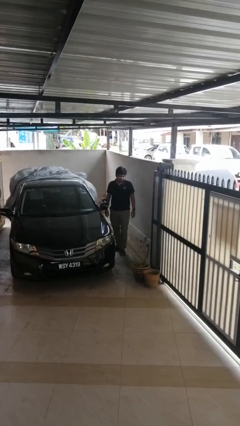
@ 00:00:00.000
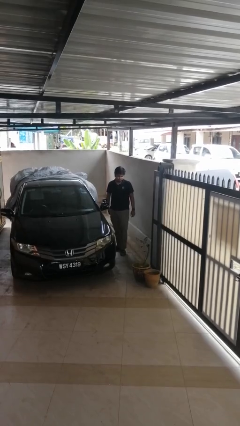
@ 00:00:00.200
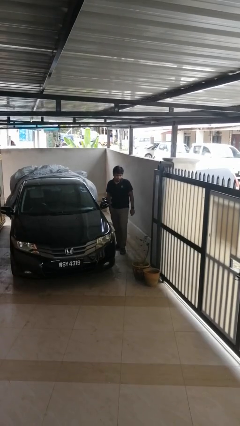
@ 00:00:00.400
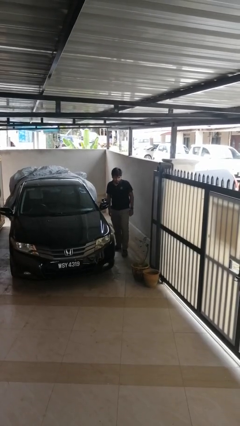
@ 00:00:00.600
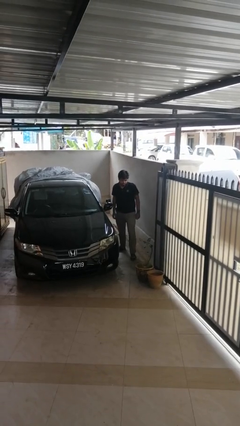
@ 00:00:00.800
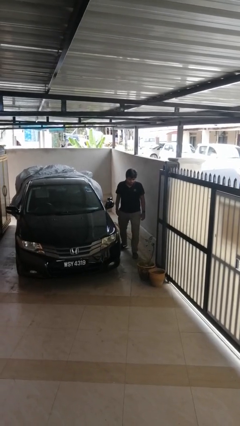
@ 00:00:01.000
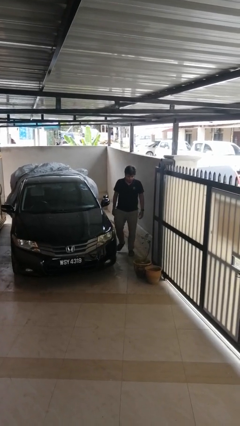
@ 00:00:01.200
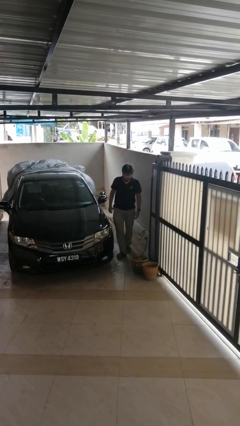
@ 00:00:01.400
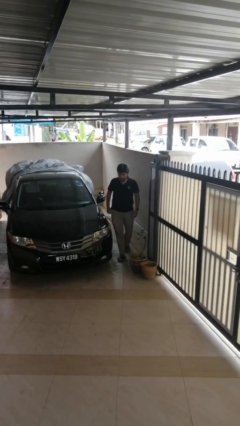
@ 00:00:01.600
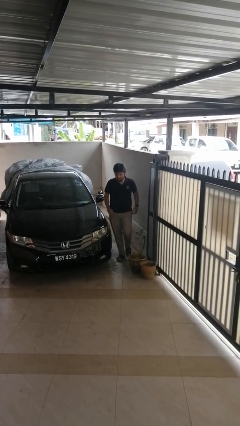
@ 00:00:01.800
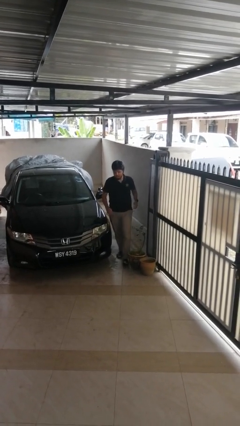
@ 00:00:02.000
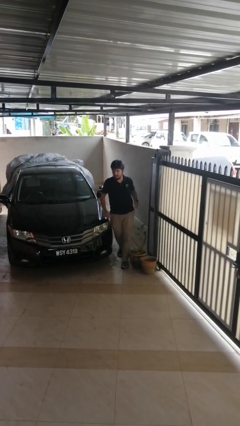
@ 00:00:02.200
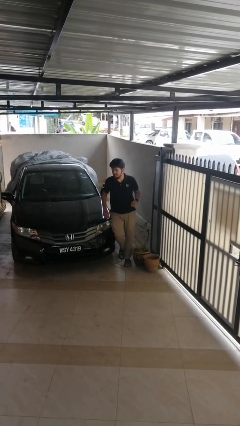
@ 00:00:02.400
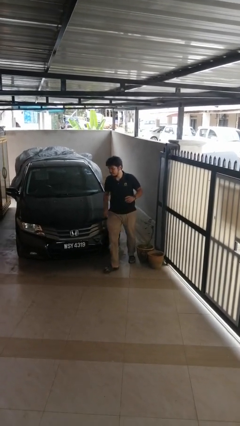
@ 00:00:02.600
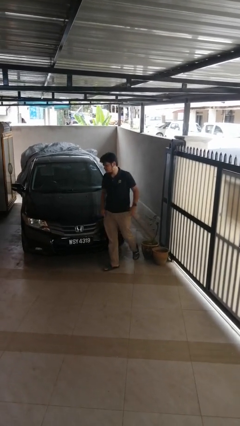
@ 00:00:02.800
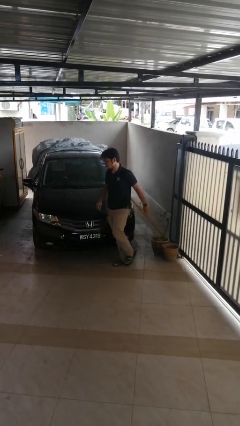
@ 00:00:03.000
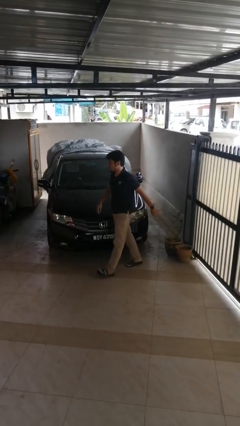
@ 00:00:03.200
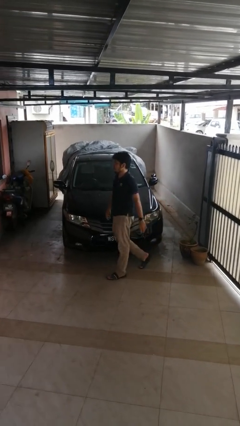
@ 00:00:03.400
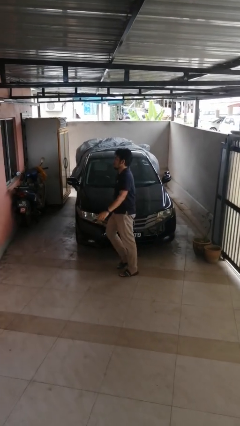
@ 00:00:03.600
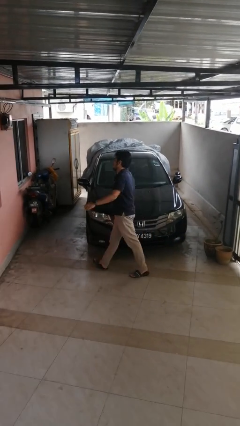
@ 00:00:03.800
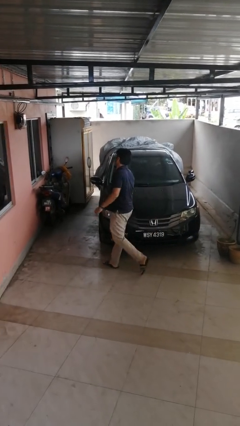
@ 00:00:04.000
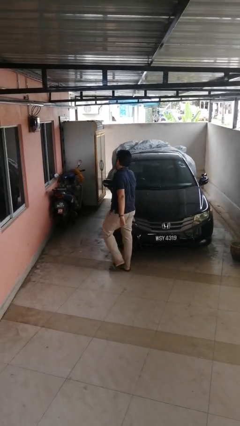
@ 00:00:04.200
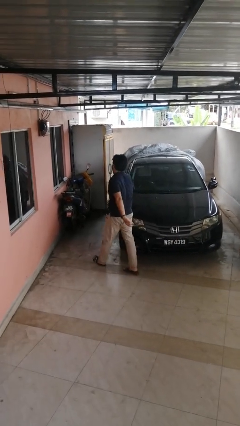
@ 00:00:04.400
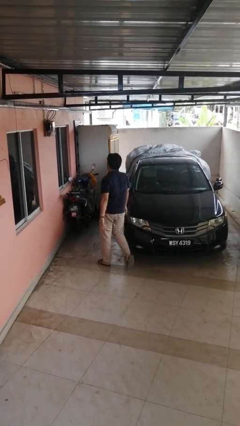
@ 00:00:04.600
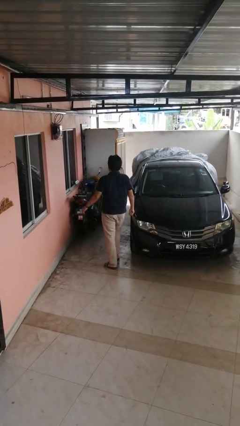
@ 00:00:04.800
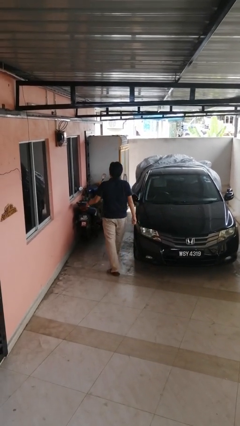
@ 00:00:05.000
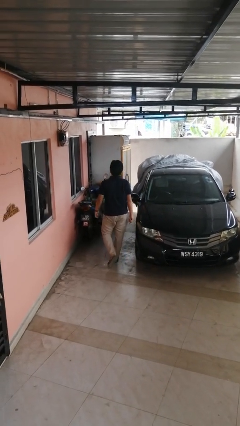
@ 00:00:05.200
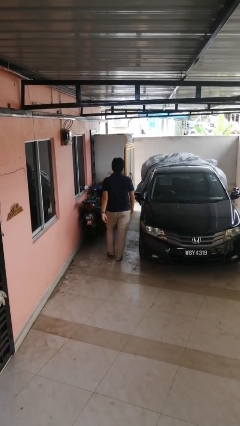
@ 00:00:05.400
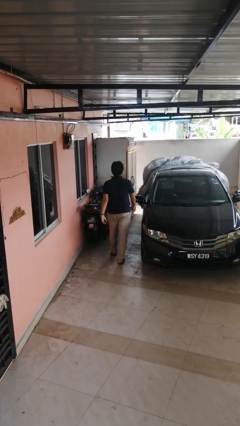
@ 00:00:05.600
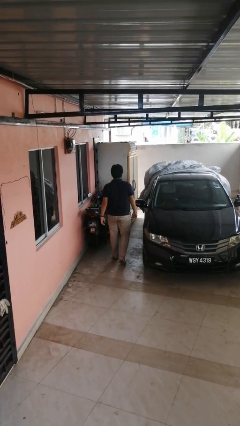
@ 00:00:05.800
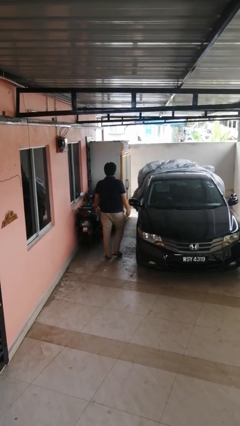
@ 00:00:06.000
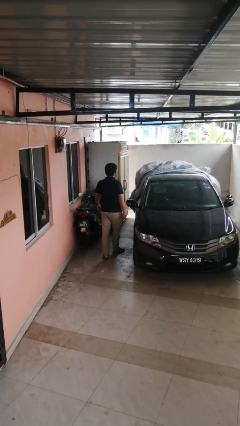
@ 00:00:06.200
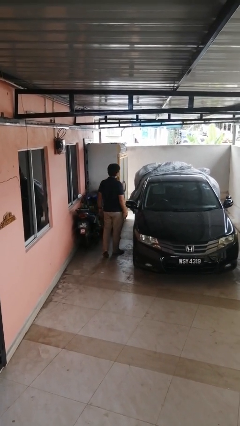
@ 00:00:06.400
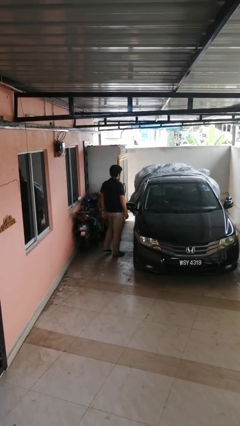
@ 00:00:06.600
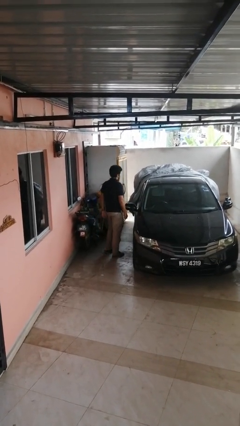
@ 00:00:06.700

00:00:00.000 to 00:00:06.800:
person walks around car

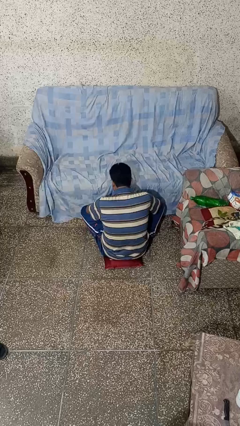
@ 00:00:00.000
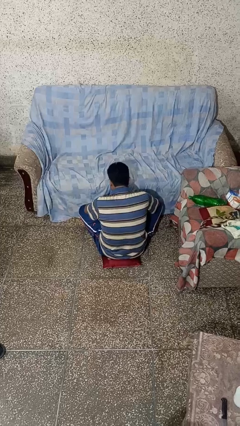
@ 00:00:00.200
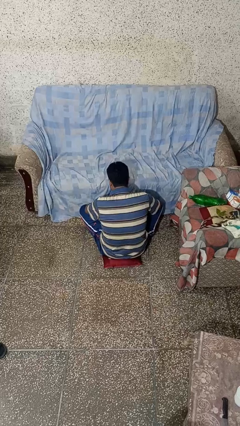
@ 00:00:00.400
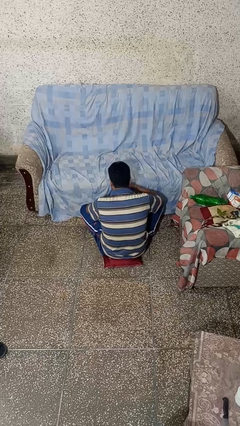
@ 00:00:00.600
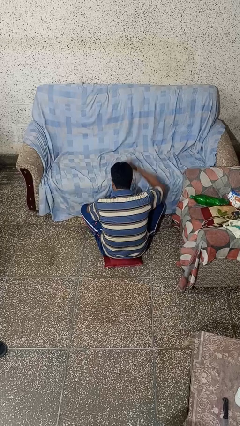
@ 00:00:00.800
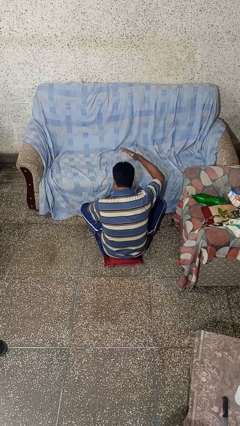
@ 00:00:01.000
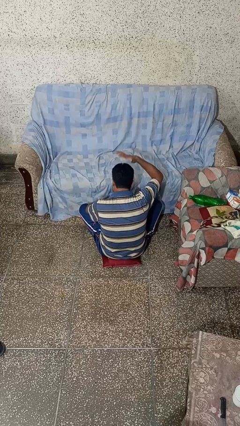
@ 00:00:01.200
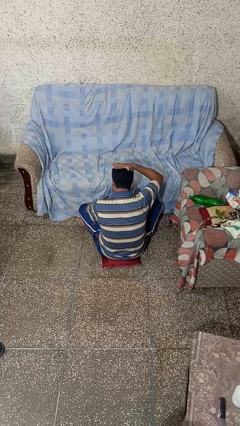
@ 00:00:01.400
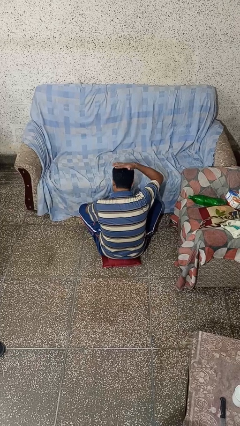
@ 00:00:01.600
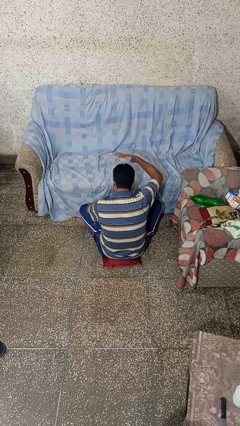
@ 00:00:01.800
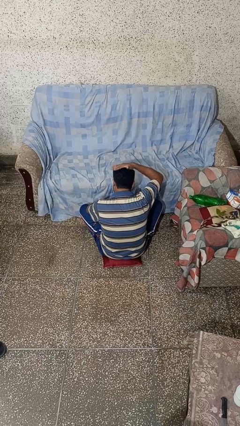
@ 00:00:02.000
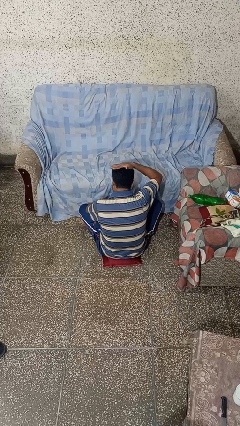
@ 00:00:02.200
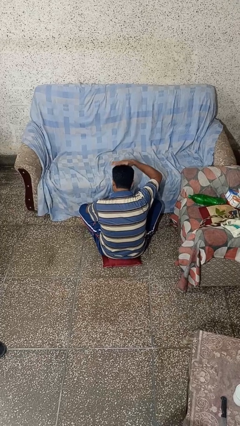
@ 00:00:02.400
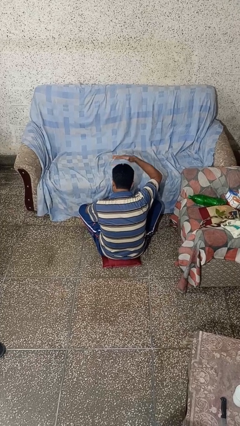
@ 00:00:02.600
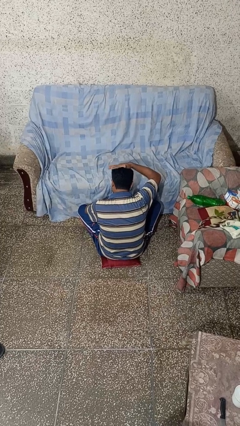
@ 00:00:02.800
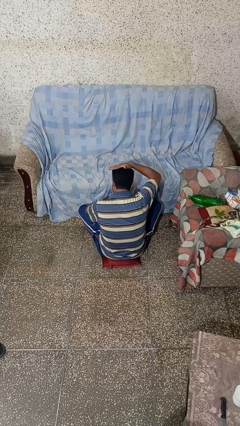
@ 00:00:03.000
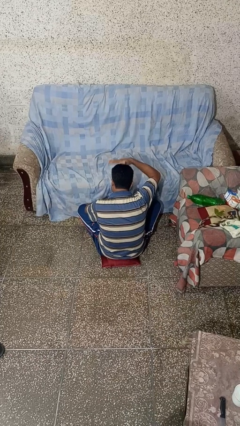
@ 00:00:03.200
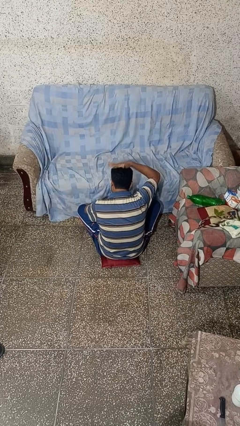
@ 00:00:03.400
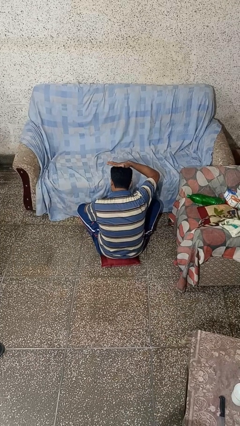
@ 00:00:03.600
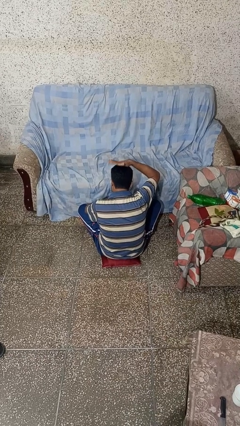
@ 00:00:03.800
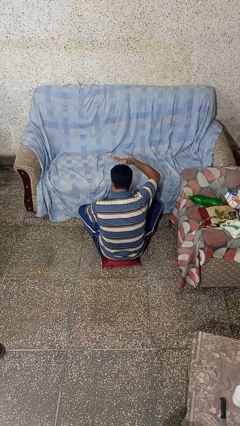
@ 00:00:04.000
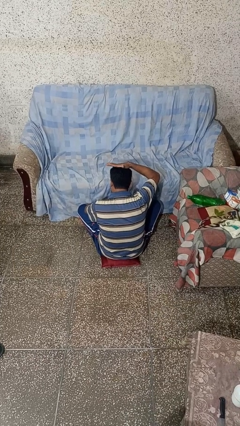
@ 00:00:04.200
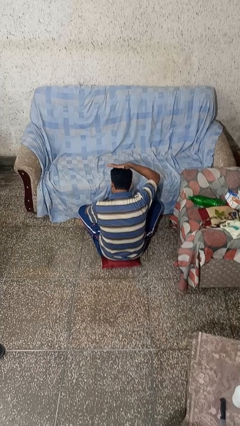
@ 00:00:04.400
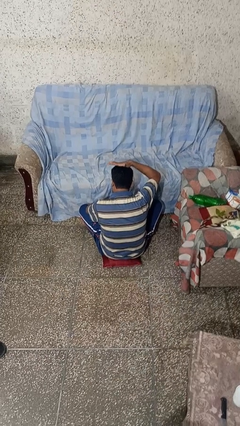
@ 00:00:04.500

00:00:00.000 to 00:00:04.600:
person pats head

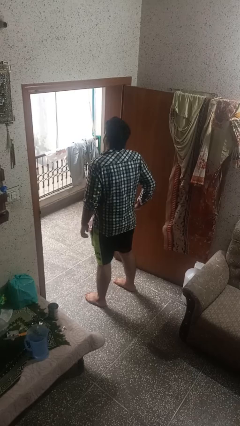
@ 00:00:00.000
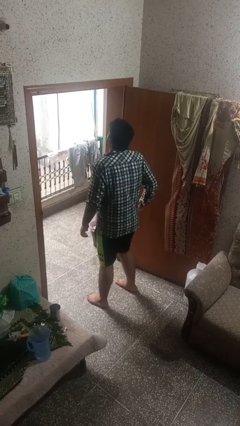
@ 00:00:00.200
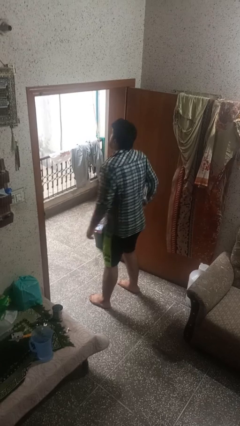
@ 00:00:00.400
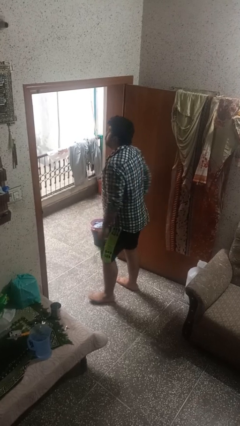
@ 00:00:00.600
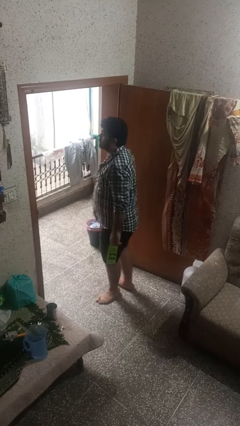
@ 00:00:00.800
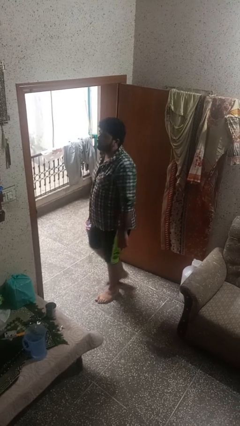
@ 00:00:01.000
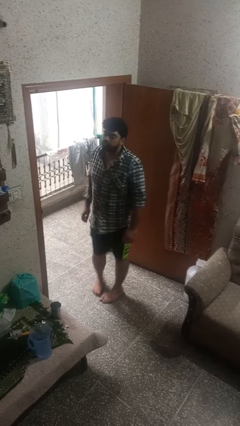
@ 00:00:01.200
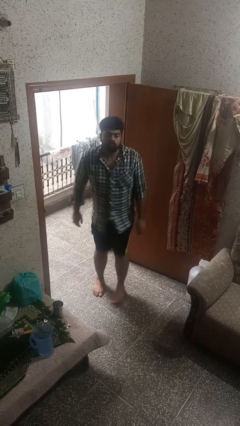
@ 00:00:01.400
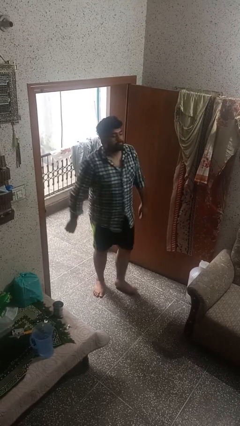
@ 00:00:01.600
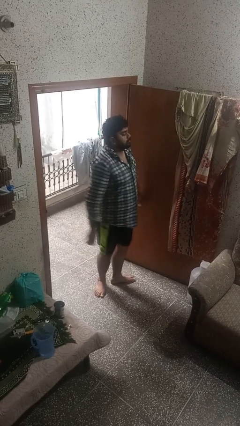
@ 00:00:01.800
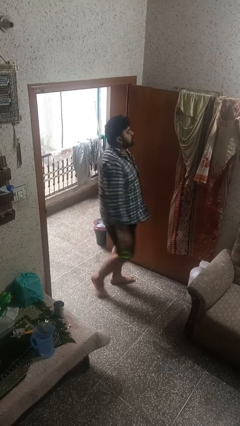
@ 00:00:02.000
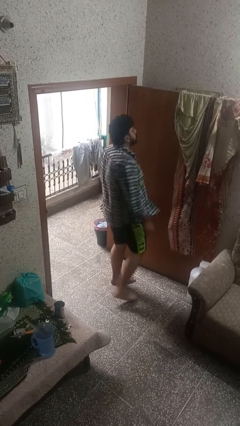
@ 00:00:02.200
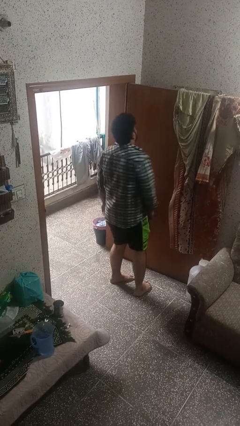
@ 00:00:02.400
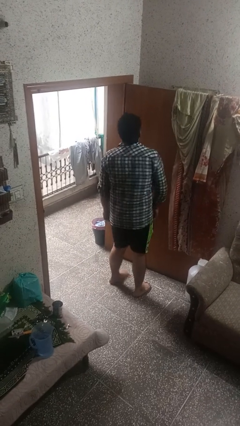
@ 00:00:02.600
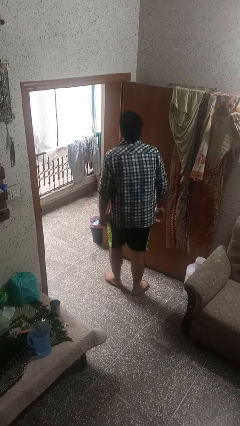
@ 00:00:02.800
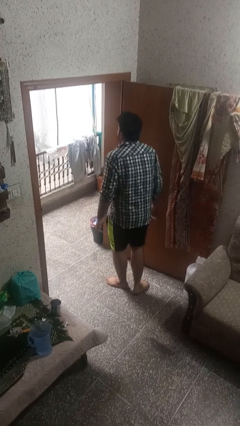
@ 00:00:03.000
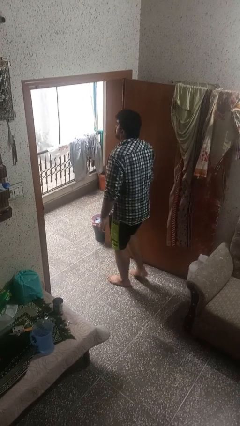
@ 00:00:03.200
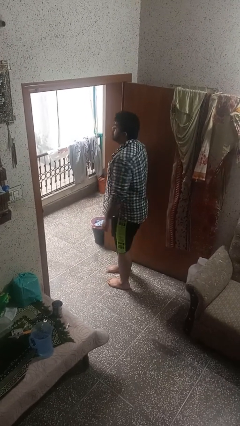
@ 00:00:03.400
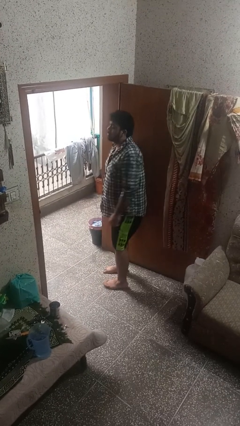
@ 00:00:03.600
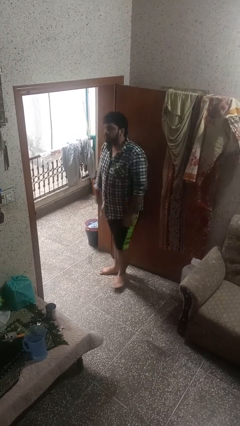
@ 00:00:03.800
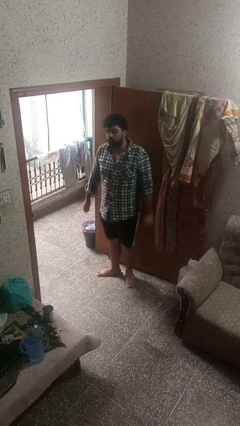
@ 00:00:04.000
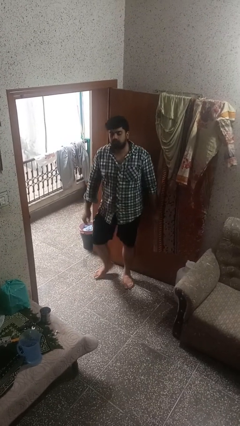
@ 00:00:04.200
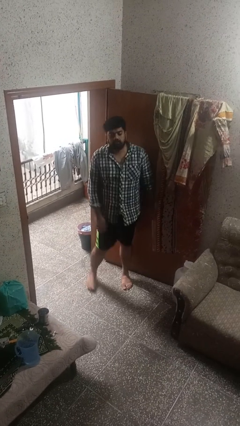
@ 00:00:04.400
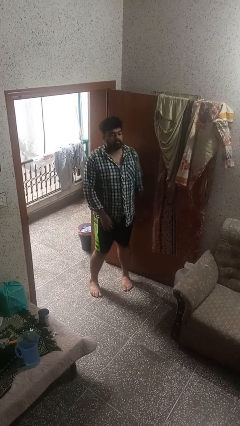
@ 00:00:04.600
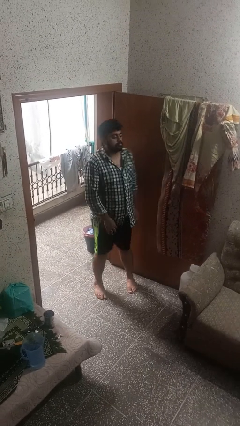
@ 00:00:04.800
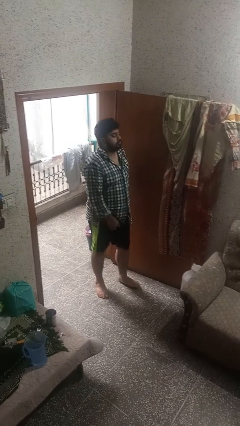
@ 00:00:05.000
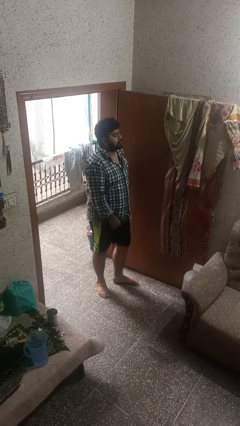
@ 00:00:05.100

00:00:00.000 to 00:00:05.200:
person twirls

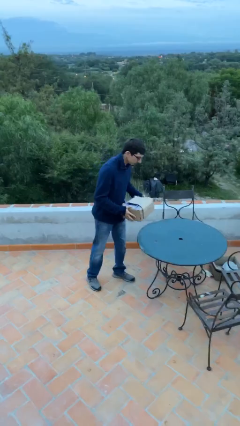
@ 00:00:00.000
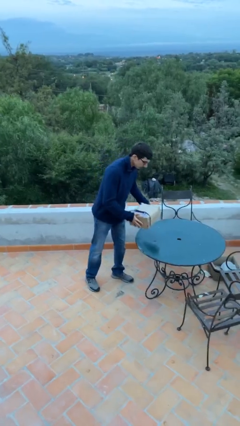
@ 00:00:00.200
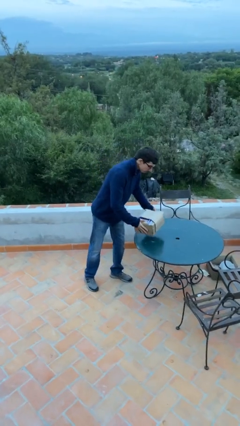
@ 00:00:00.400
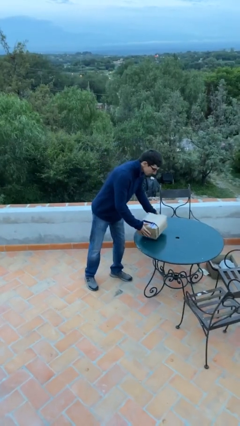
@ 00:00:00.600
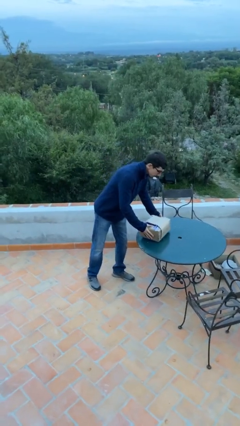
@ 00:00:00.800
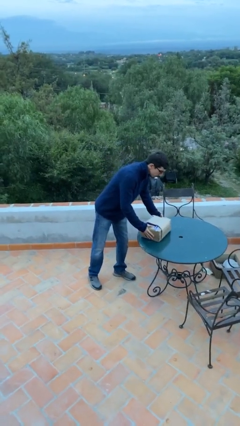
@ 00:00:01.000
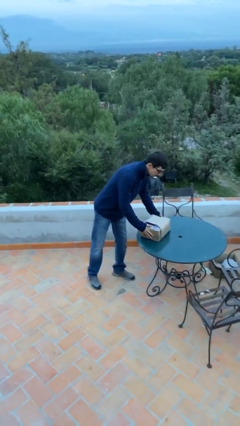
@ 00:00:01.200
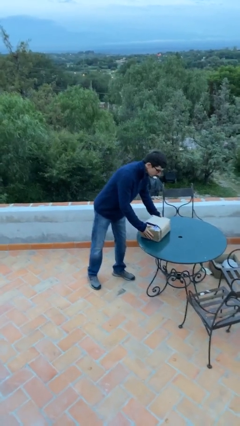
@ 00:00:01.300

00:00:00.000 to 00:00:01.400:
person puts down object on table
